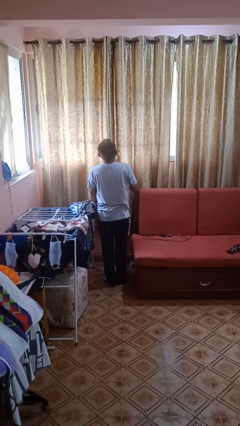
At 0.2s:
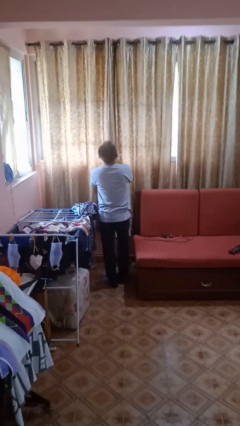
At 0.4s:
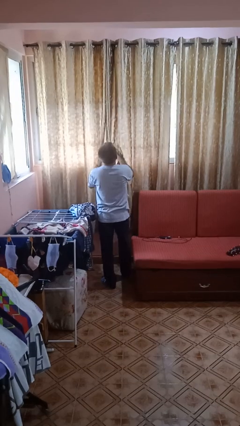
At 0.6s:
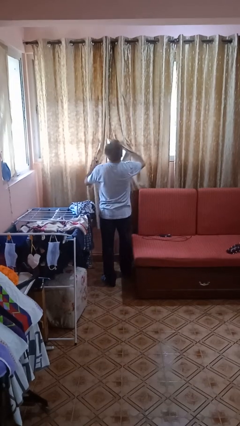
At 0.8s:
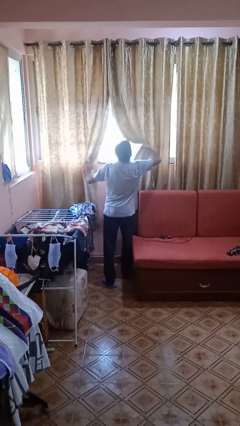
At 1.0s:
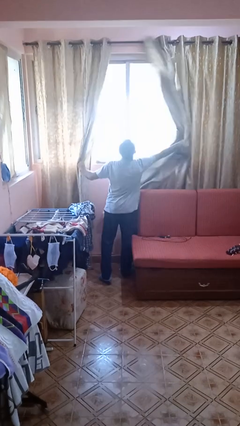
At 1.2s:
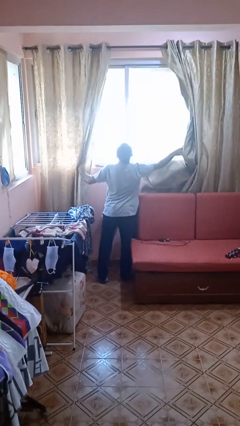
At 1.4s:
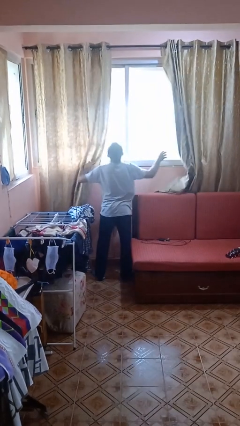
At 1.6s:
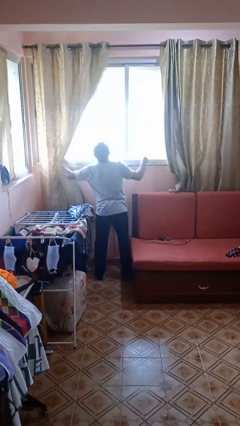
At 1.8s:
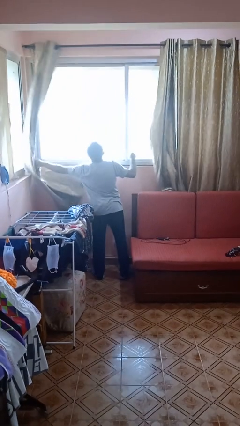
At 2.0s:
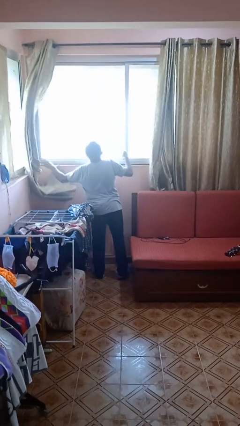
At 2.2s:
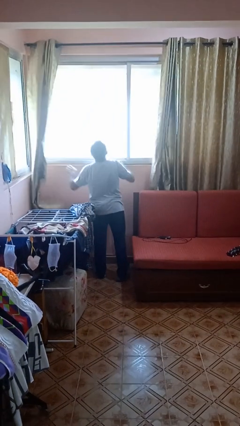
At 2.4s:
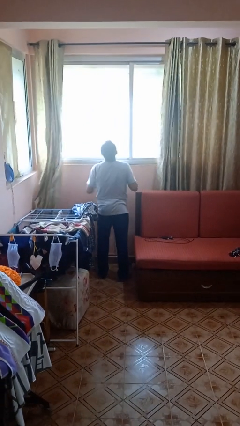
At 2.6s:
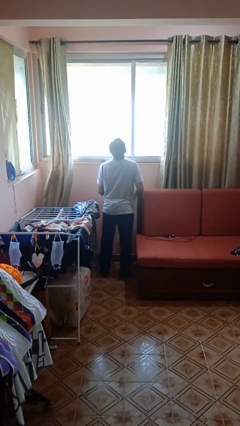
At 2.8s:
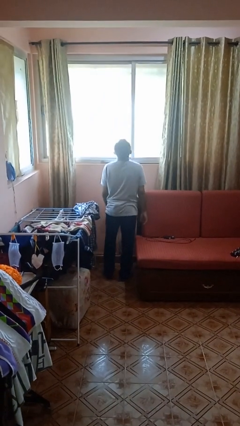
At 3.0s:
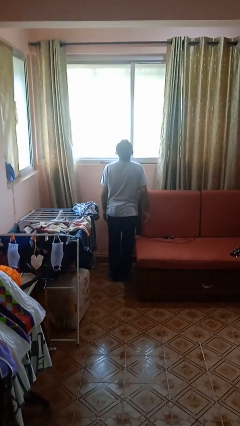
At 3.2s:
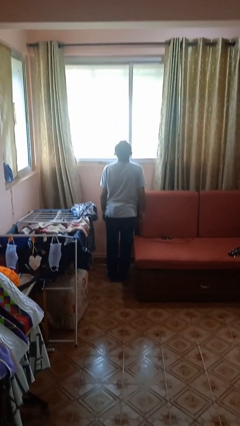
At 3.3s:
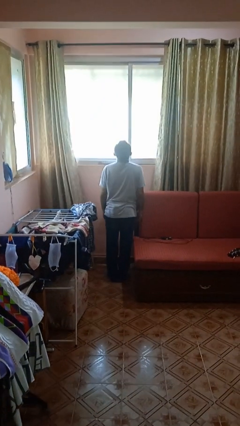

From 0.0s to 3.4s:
person opens curtains

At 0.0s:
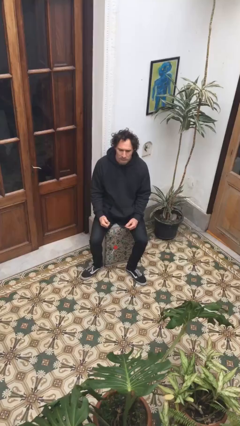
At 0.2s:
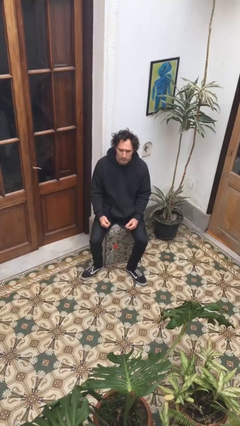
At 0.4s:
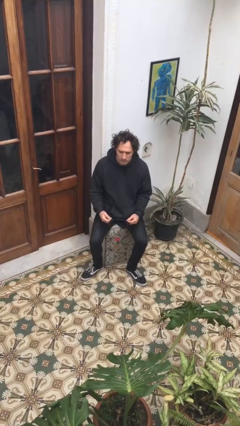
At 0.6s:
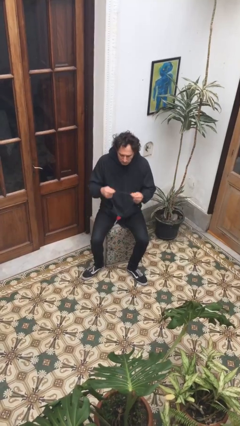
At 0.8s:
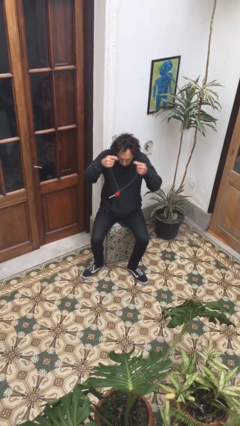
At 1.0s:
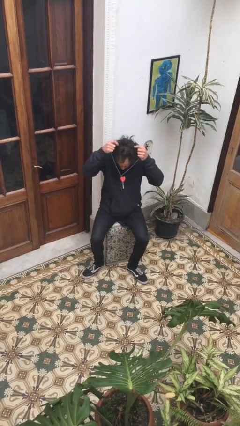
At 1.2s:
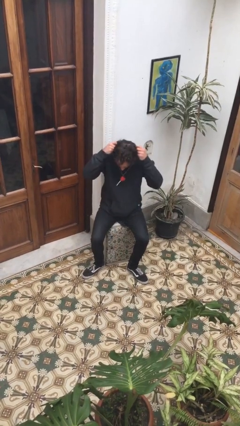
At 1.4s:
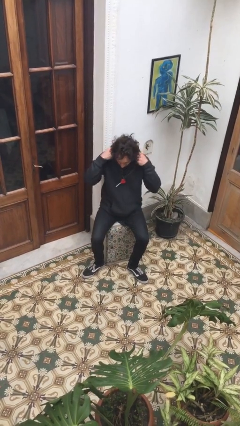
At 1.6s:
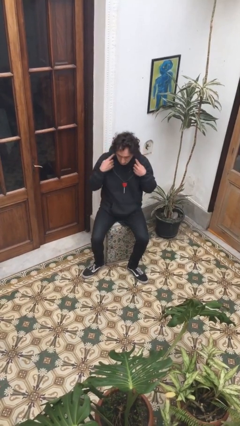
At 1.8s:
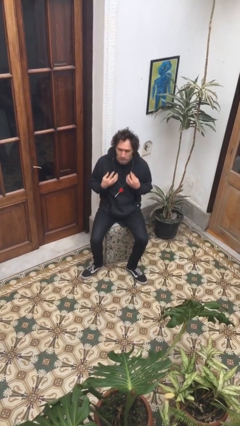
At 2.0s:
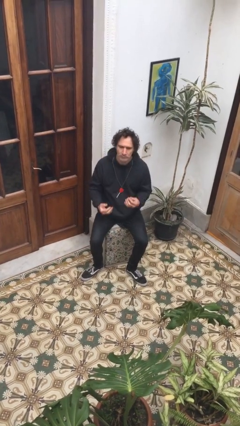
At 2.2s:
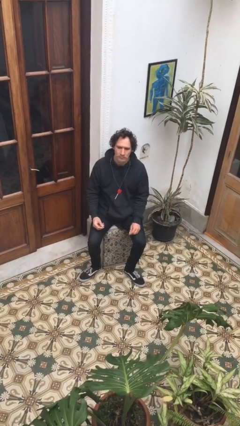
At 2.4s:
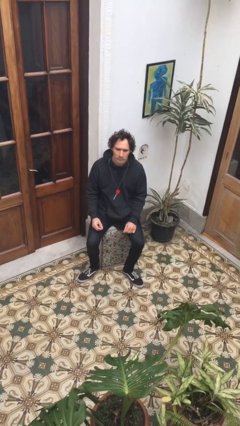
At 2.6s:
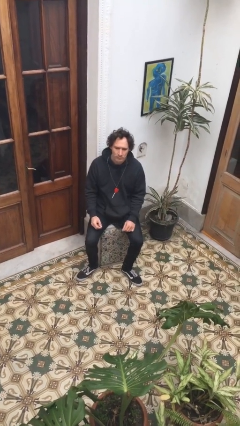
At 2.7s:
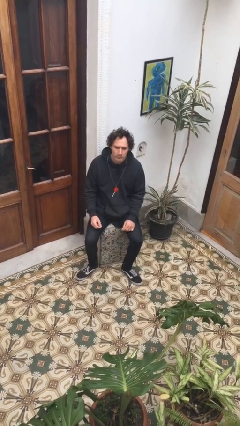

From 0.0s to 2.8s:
person puts on necklace

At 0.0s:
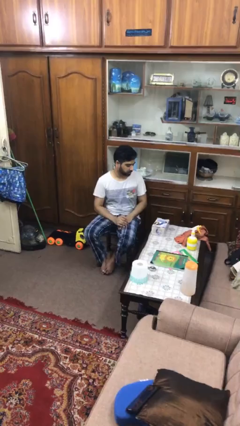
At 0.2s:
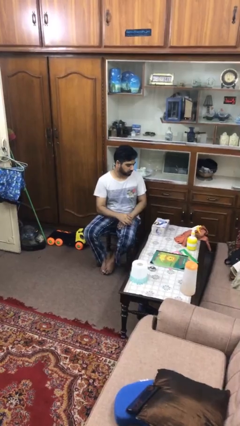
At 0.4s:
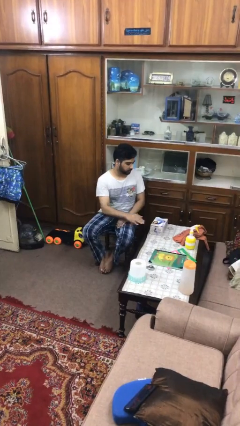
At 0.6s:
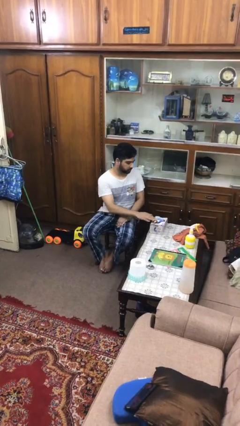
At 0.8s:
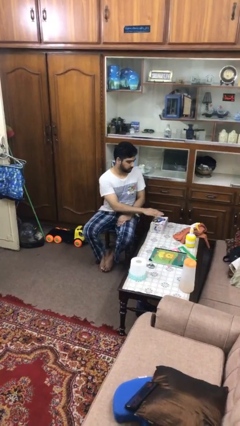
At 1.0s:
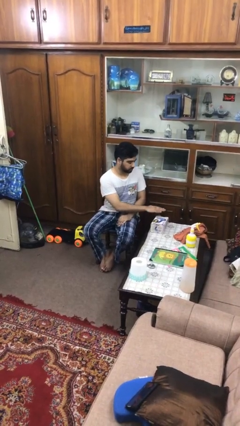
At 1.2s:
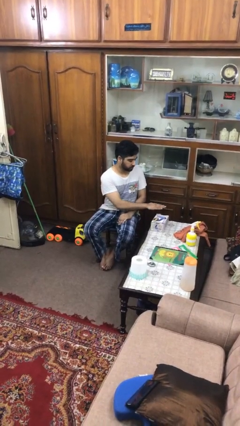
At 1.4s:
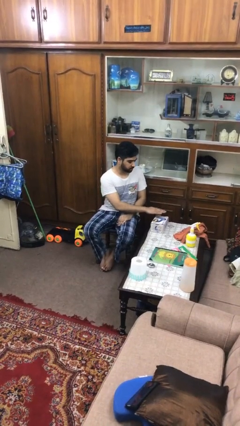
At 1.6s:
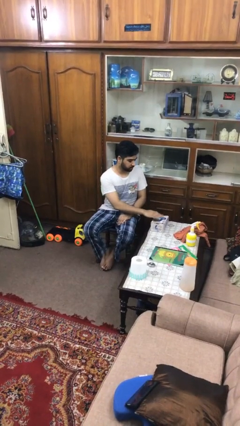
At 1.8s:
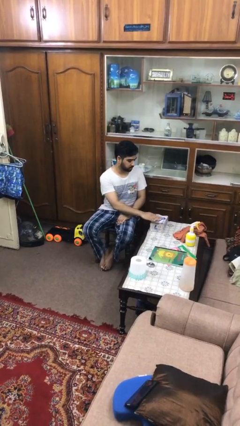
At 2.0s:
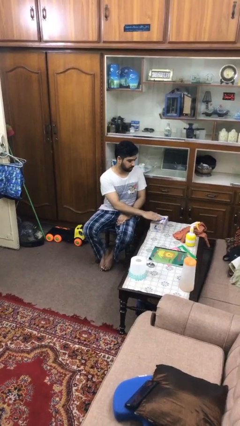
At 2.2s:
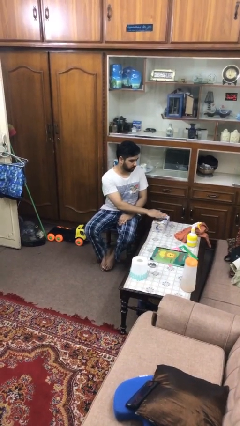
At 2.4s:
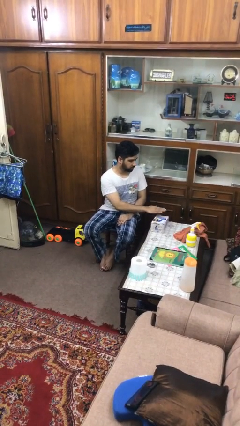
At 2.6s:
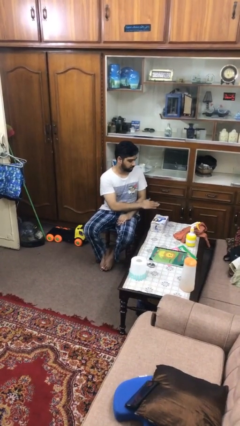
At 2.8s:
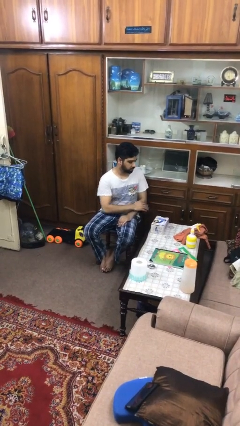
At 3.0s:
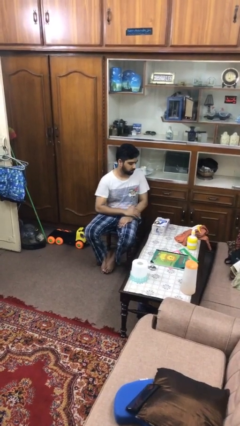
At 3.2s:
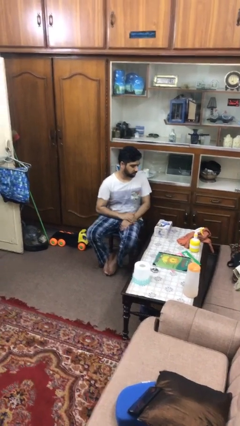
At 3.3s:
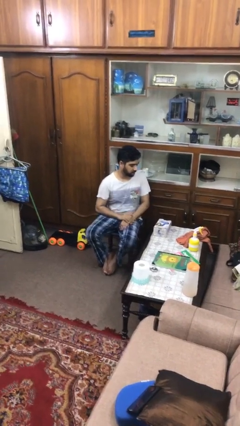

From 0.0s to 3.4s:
person waves hand over object

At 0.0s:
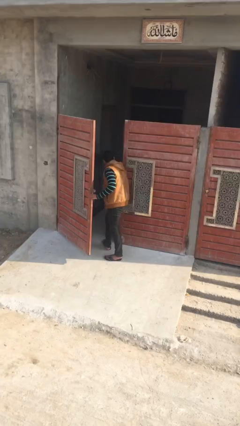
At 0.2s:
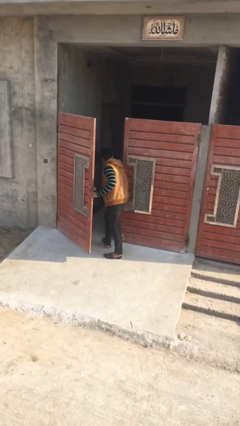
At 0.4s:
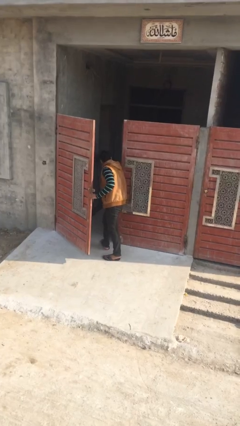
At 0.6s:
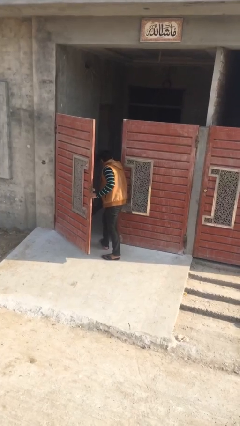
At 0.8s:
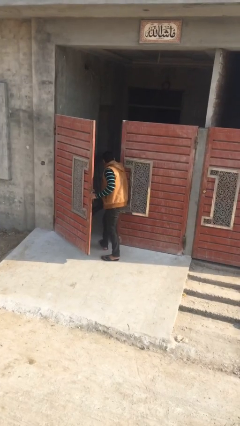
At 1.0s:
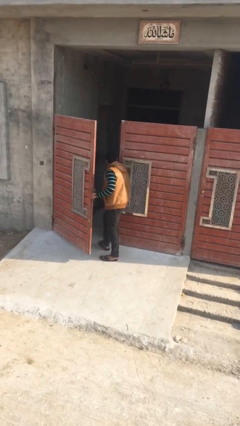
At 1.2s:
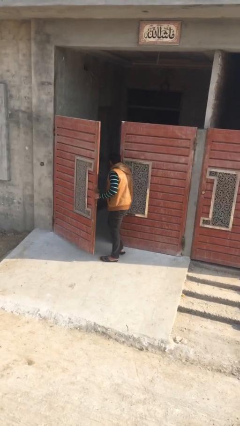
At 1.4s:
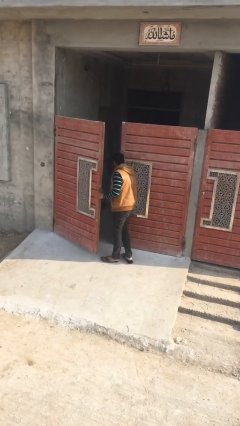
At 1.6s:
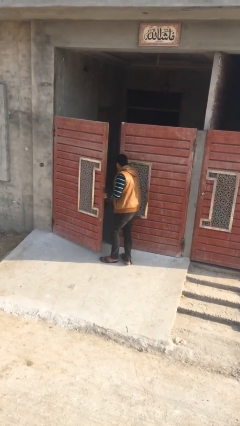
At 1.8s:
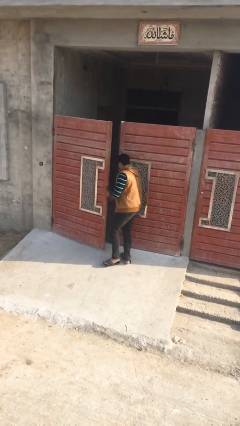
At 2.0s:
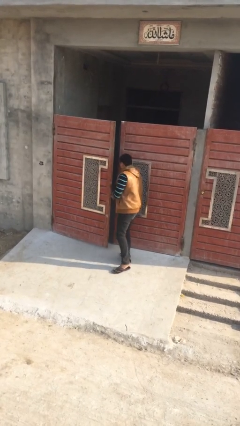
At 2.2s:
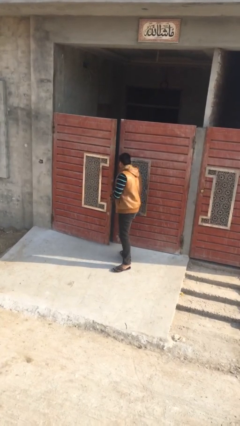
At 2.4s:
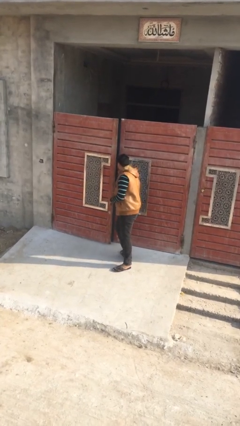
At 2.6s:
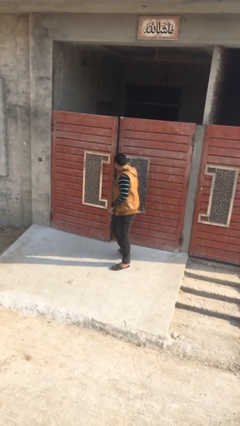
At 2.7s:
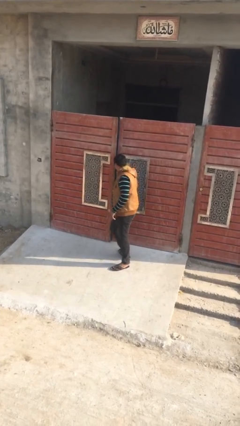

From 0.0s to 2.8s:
person closes facility door

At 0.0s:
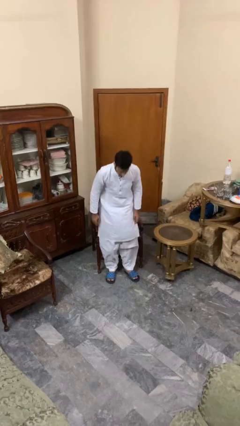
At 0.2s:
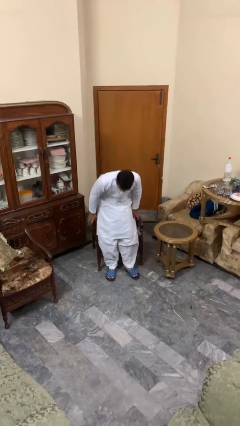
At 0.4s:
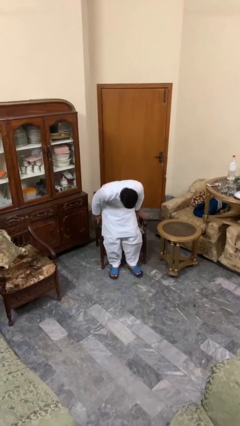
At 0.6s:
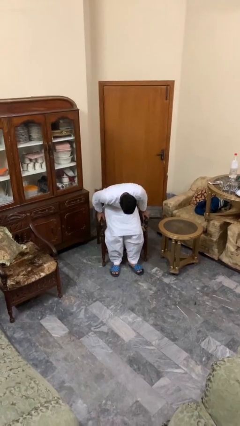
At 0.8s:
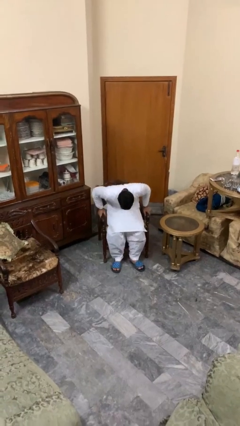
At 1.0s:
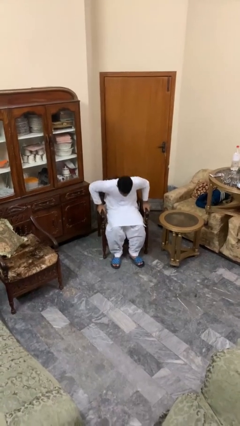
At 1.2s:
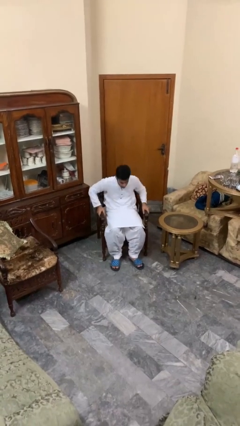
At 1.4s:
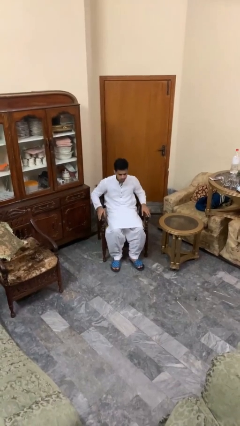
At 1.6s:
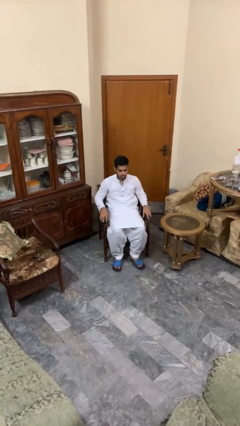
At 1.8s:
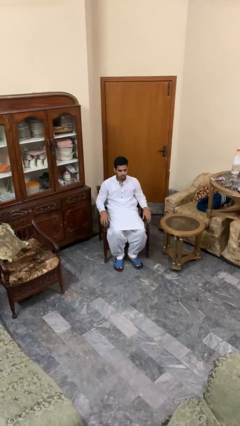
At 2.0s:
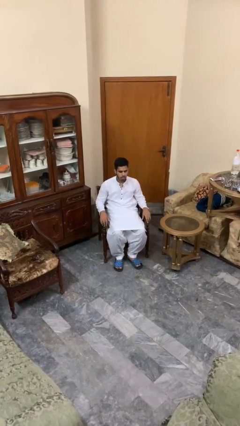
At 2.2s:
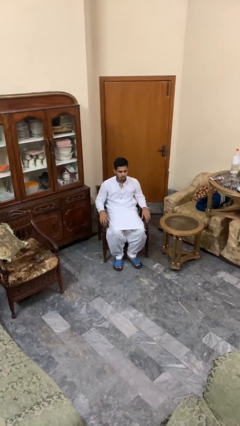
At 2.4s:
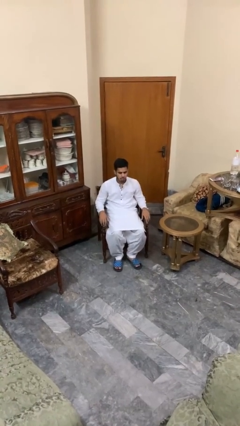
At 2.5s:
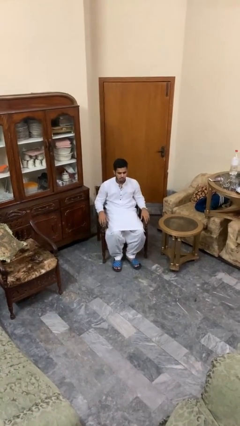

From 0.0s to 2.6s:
person sits down

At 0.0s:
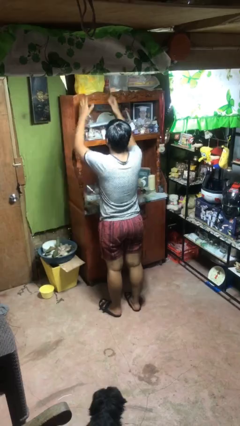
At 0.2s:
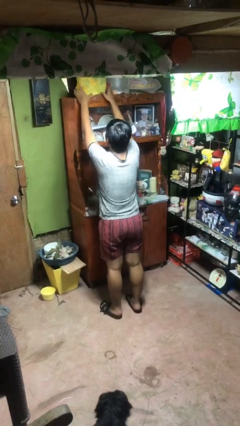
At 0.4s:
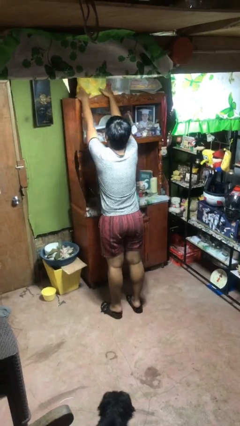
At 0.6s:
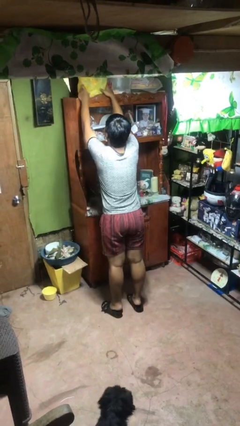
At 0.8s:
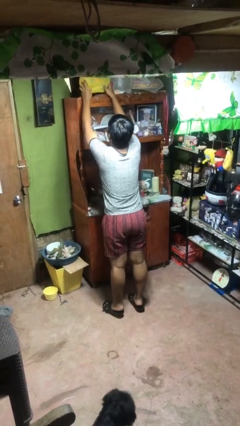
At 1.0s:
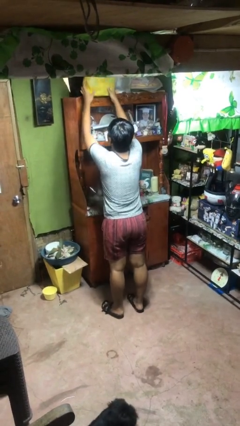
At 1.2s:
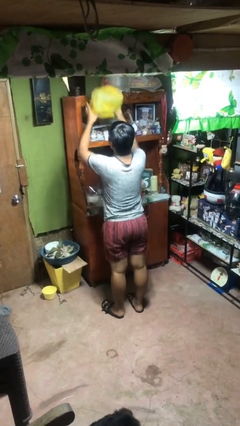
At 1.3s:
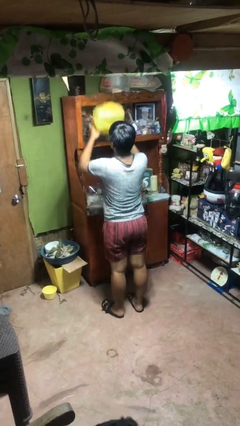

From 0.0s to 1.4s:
person picks up object from shelf

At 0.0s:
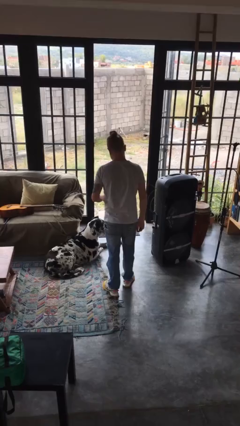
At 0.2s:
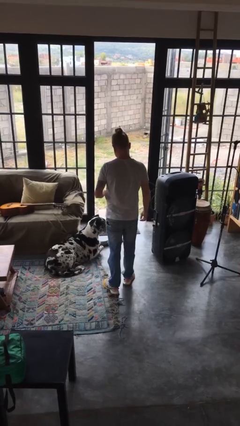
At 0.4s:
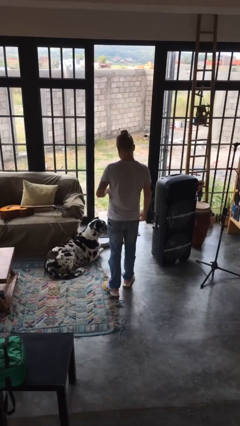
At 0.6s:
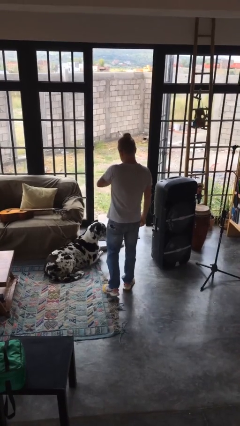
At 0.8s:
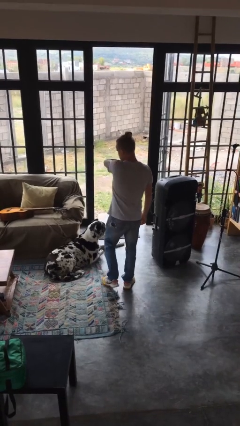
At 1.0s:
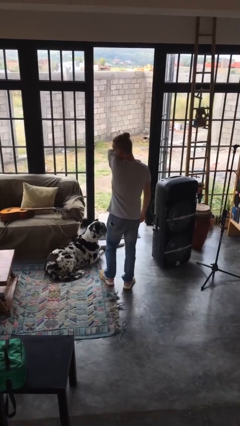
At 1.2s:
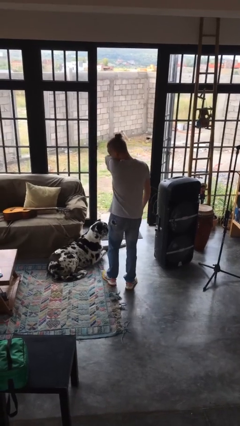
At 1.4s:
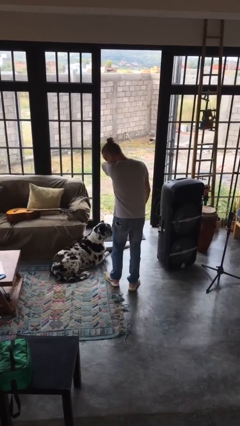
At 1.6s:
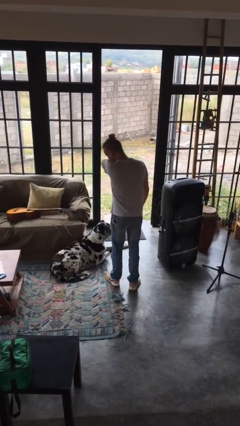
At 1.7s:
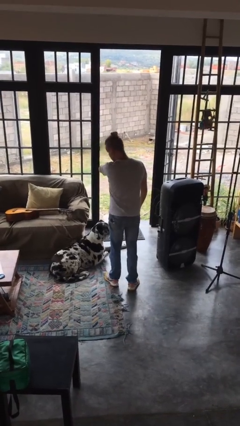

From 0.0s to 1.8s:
person sneezes into arm
